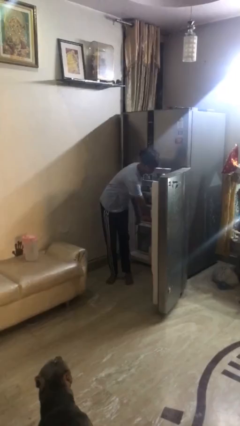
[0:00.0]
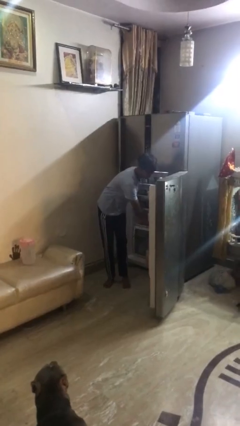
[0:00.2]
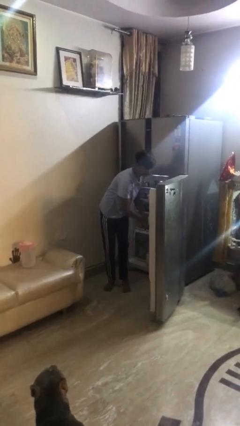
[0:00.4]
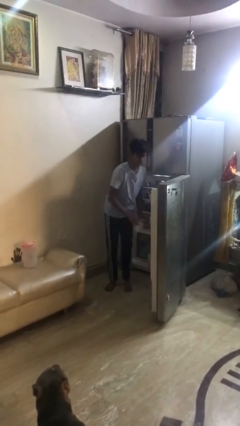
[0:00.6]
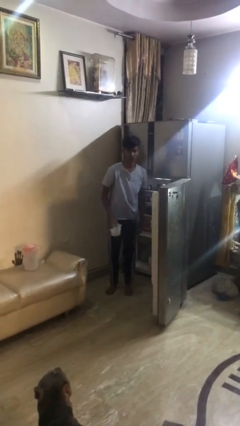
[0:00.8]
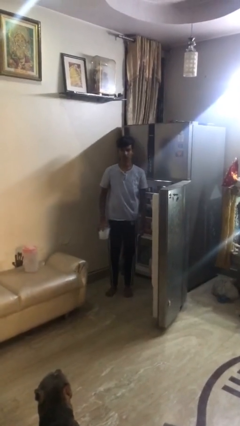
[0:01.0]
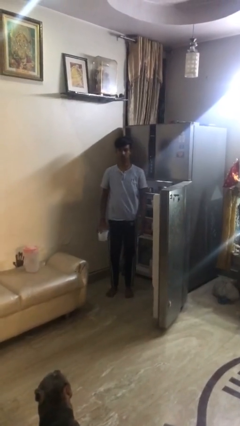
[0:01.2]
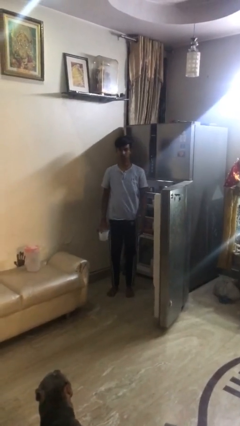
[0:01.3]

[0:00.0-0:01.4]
person takes object from refrigerator

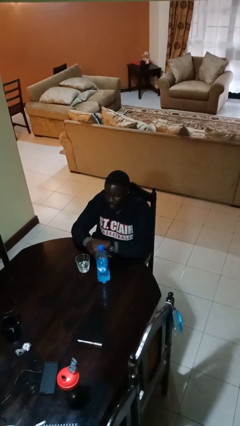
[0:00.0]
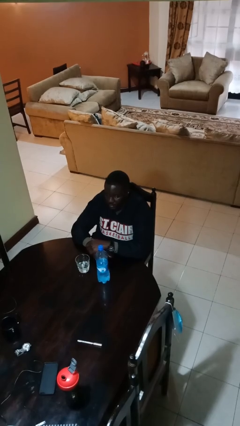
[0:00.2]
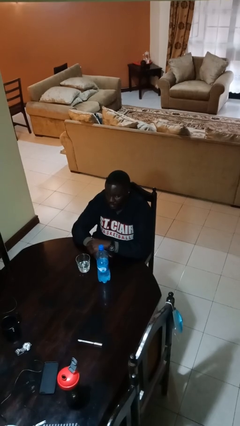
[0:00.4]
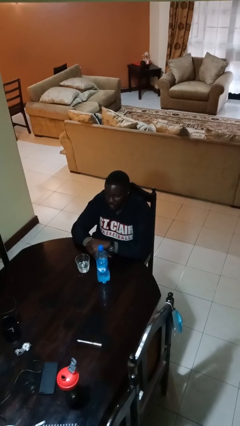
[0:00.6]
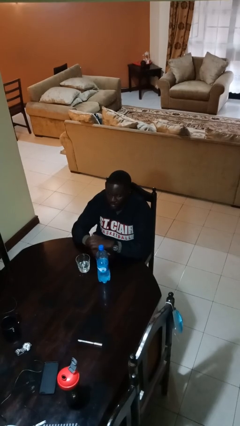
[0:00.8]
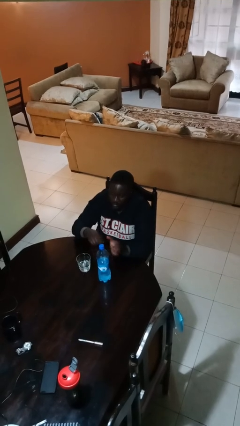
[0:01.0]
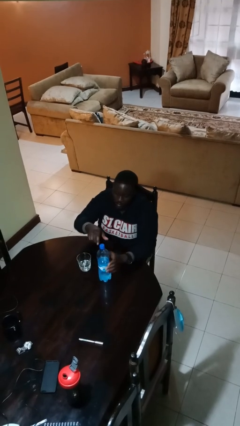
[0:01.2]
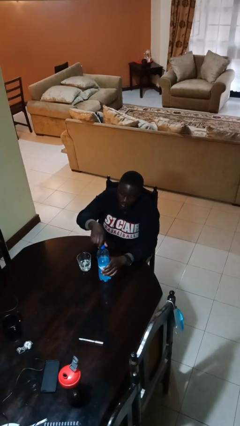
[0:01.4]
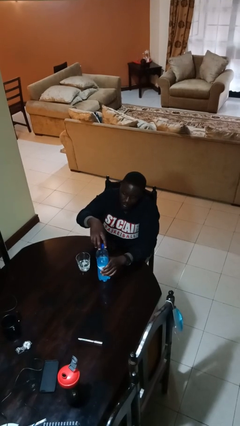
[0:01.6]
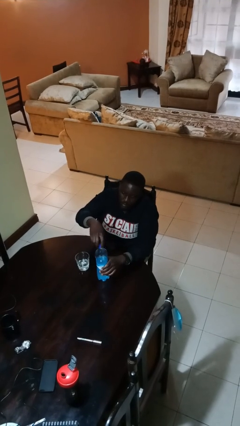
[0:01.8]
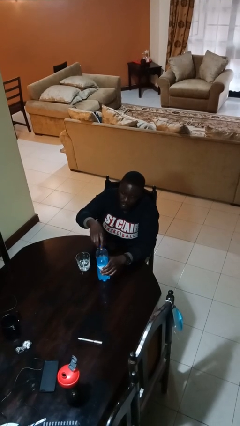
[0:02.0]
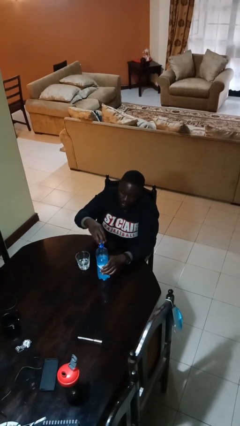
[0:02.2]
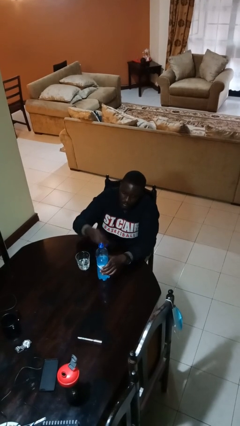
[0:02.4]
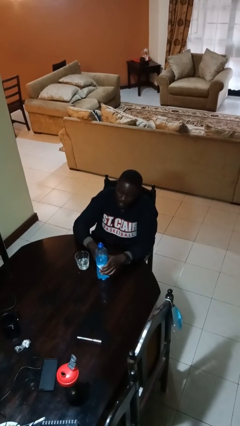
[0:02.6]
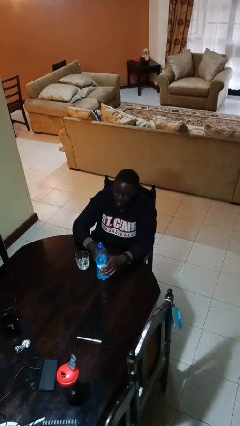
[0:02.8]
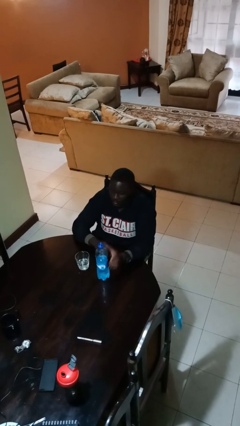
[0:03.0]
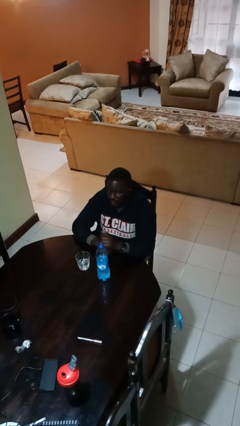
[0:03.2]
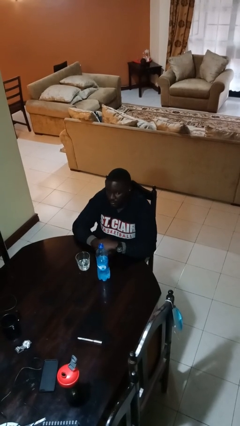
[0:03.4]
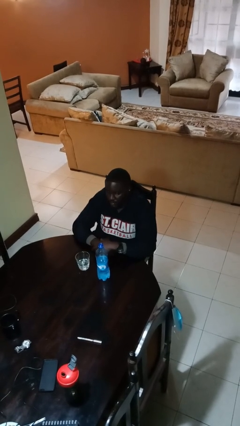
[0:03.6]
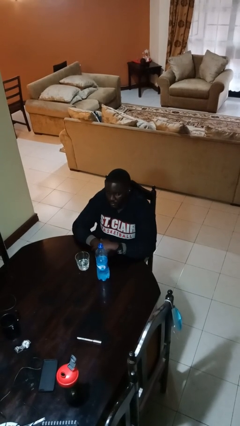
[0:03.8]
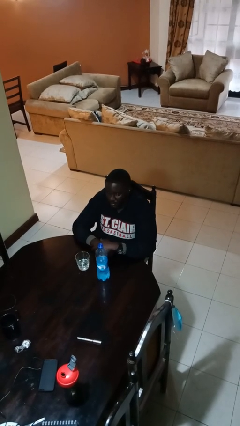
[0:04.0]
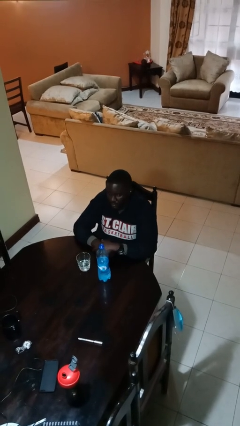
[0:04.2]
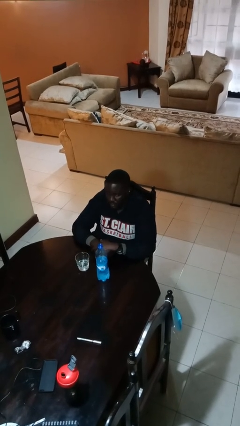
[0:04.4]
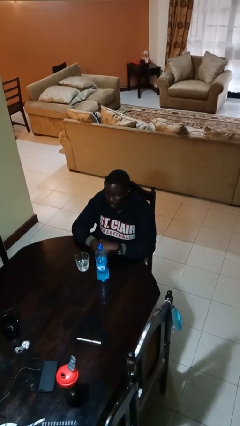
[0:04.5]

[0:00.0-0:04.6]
person unscrews lid from bottle

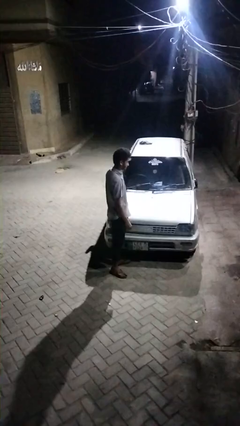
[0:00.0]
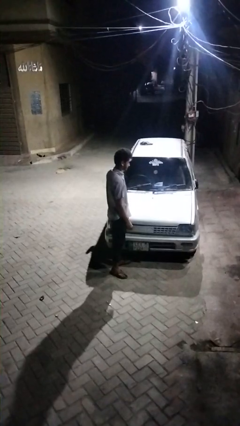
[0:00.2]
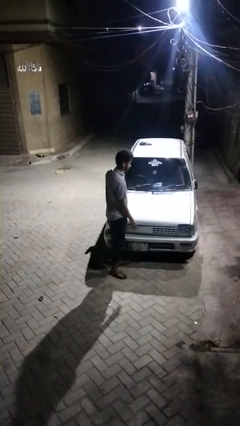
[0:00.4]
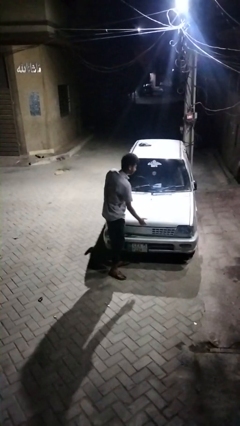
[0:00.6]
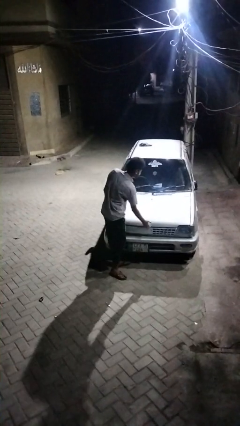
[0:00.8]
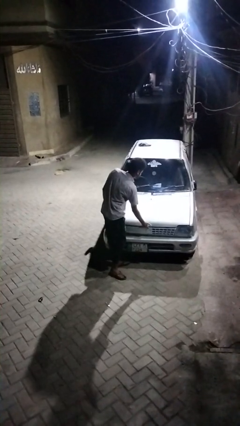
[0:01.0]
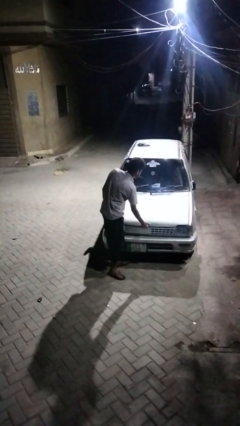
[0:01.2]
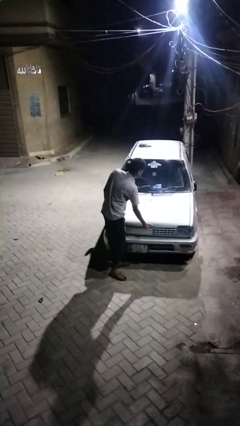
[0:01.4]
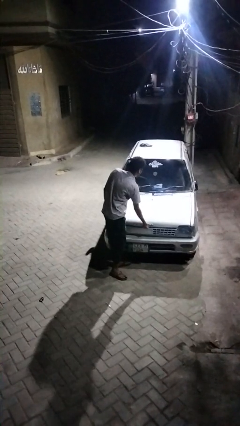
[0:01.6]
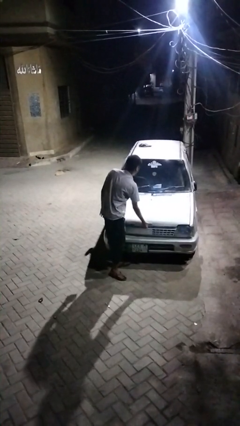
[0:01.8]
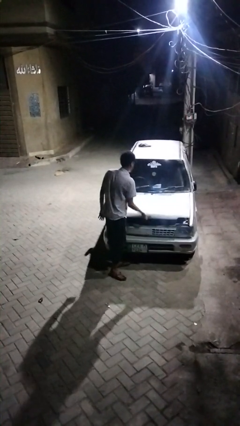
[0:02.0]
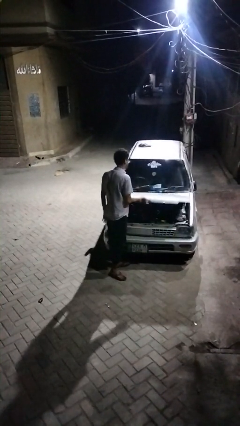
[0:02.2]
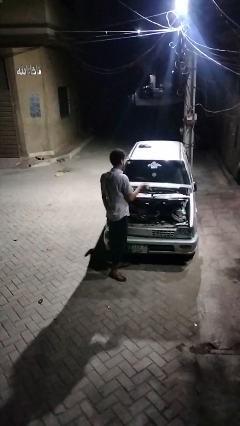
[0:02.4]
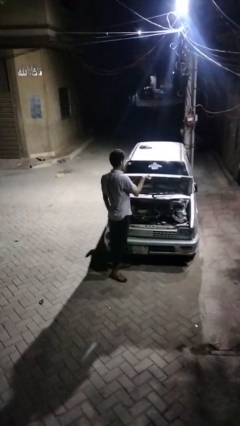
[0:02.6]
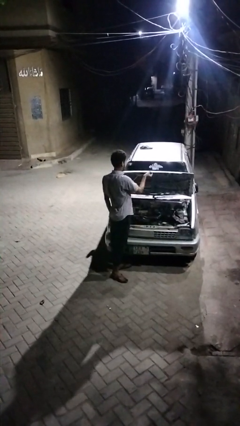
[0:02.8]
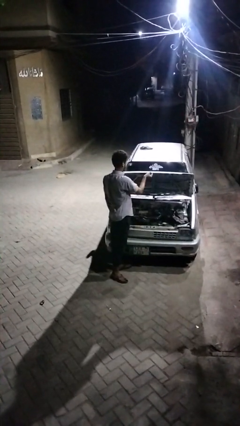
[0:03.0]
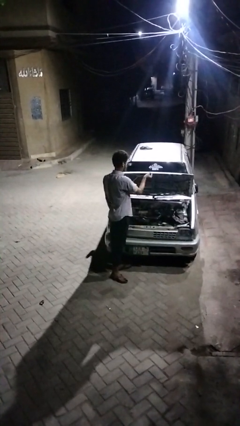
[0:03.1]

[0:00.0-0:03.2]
person opens car hood

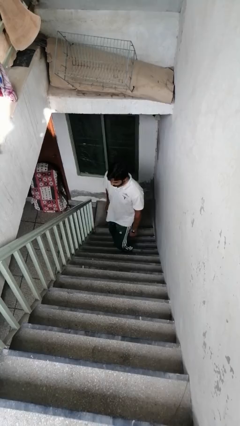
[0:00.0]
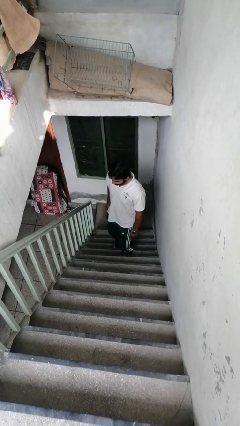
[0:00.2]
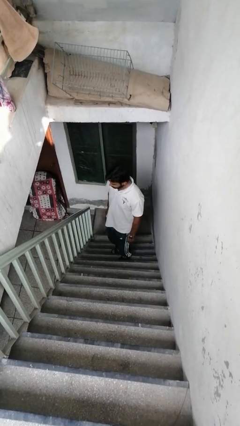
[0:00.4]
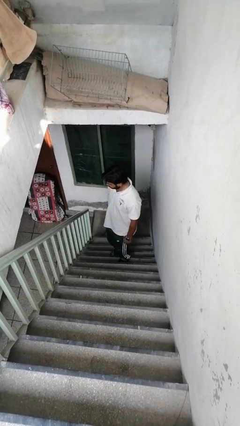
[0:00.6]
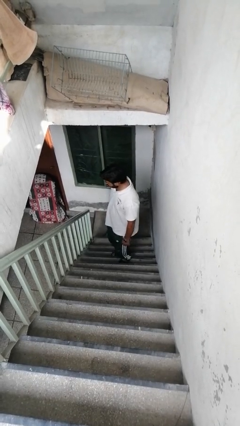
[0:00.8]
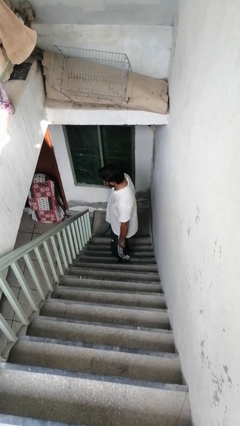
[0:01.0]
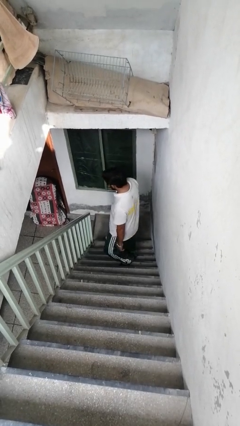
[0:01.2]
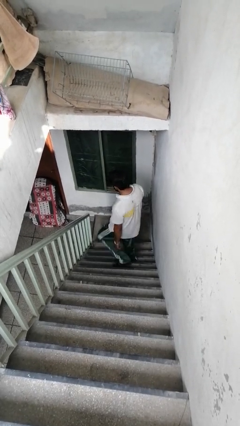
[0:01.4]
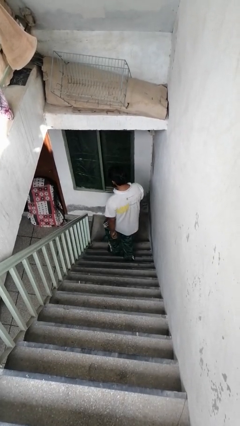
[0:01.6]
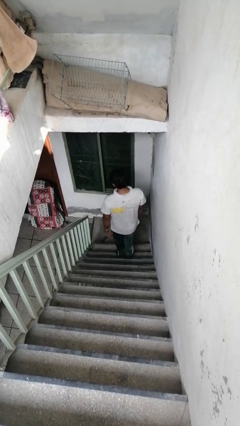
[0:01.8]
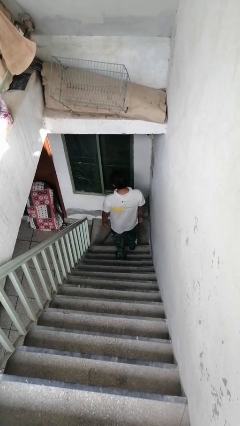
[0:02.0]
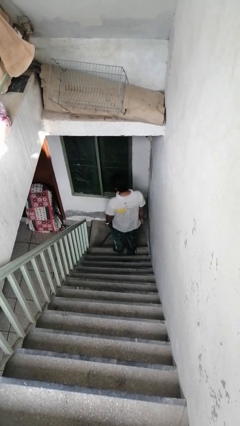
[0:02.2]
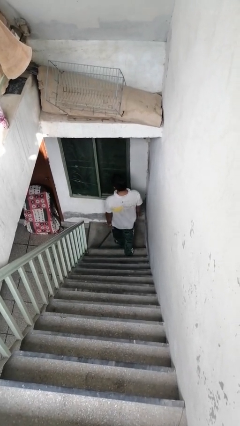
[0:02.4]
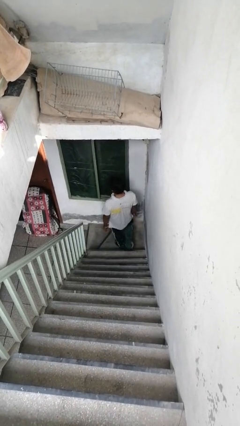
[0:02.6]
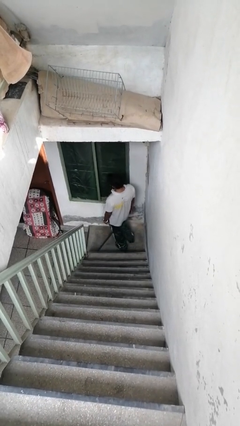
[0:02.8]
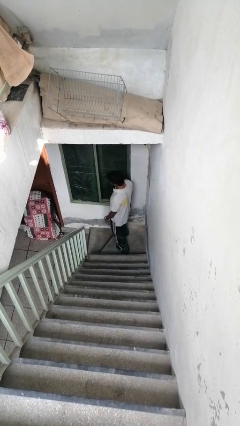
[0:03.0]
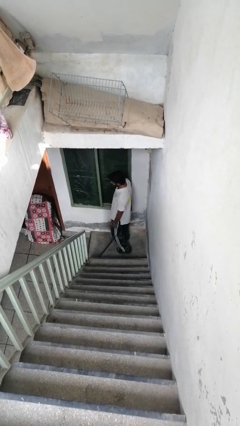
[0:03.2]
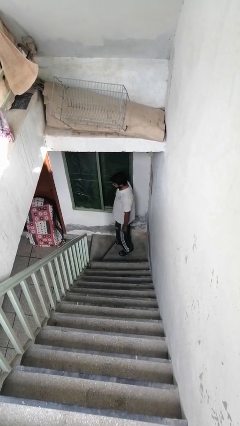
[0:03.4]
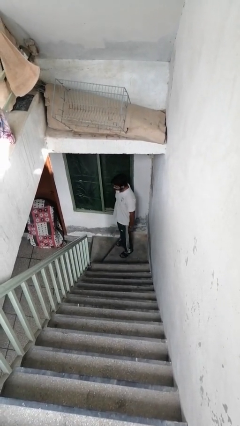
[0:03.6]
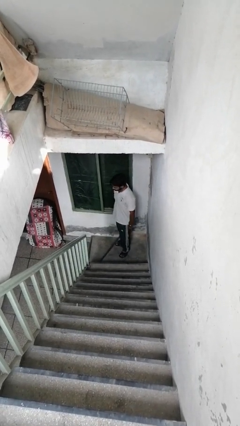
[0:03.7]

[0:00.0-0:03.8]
person climbs down stairs

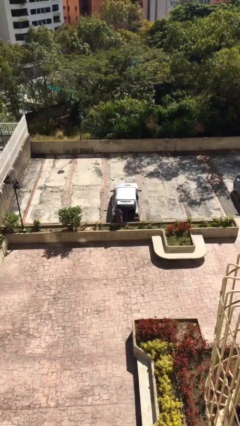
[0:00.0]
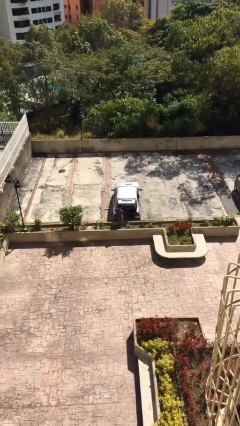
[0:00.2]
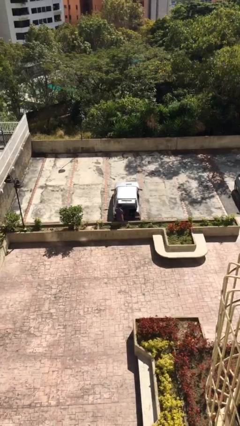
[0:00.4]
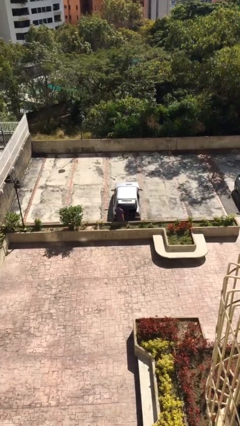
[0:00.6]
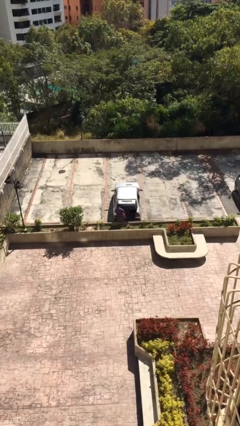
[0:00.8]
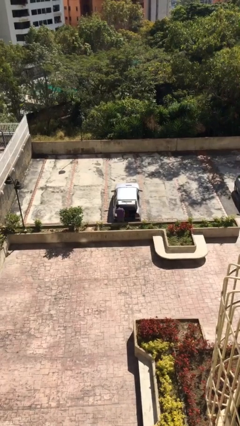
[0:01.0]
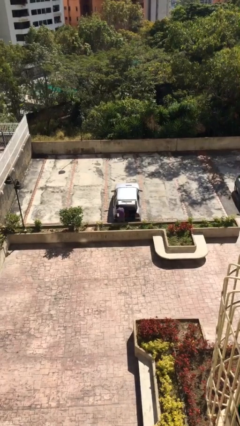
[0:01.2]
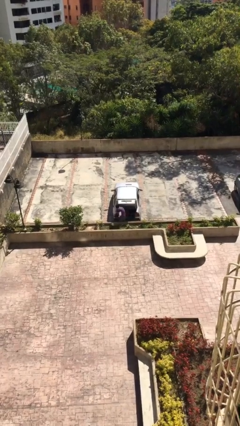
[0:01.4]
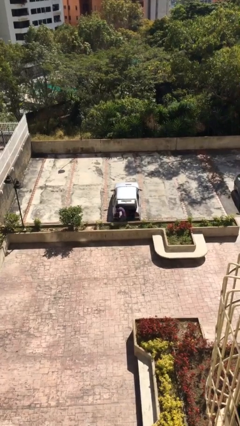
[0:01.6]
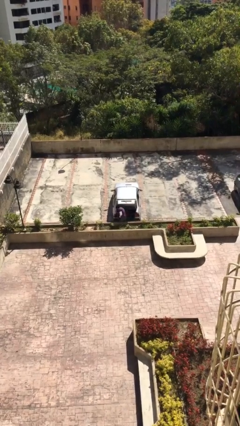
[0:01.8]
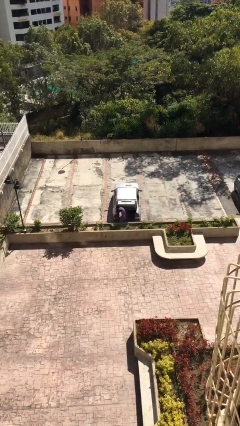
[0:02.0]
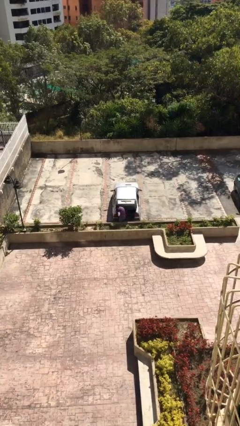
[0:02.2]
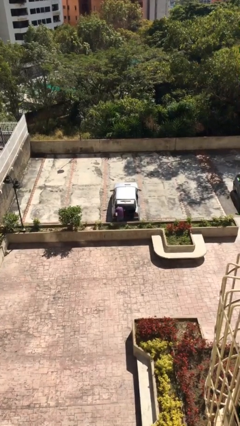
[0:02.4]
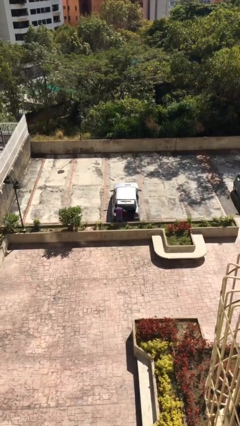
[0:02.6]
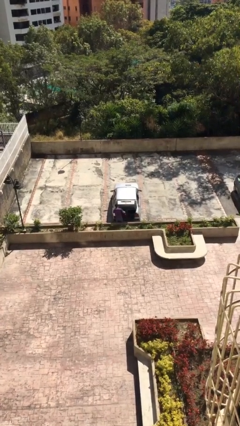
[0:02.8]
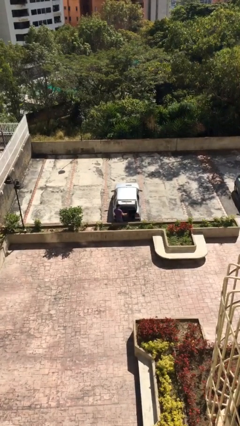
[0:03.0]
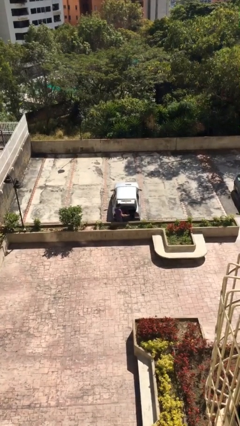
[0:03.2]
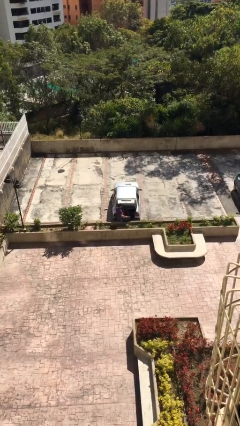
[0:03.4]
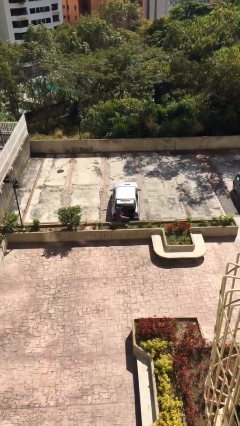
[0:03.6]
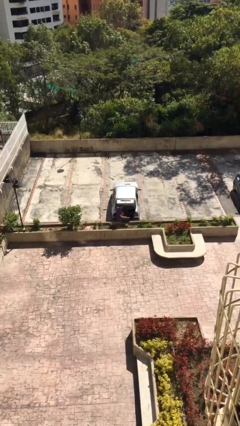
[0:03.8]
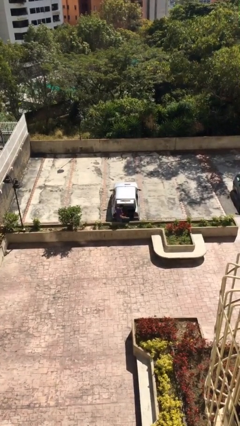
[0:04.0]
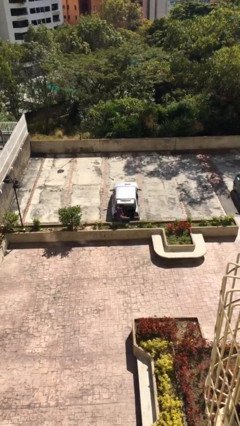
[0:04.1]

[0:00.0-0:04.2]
person unloads car
